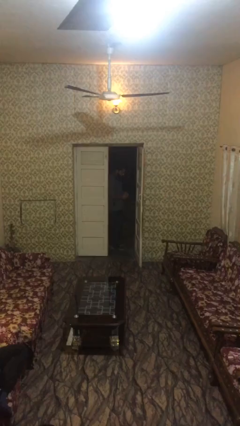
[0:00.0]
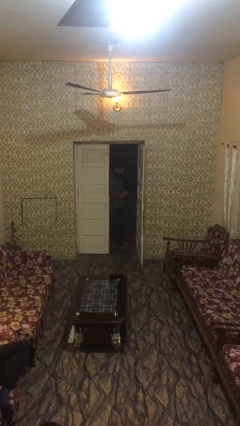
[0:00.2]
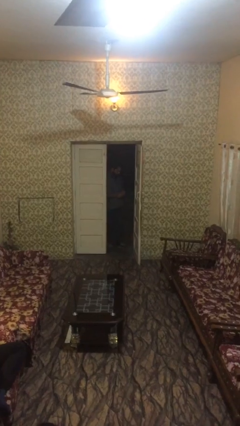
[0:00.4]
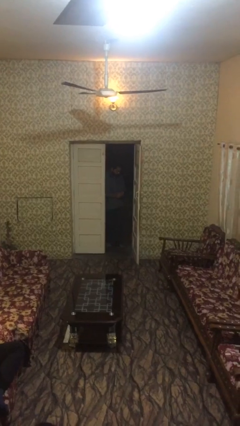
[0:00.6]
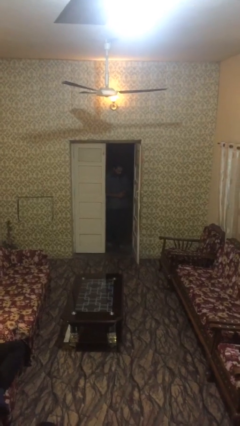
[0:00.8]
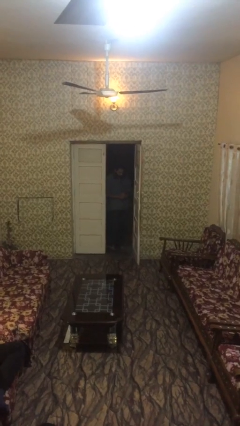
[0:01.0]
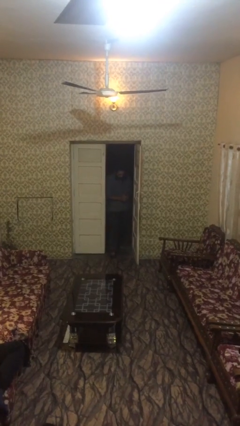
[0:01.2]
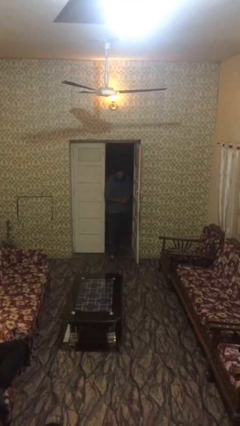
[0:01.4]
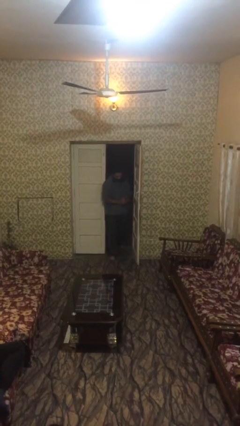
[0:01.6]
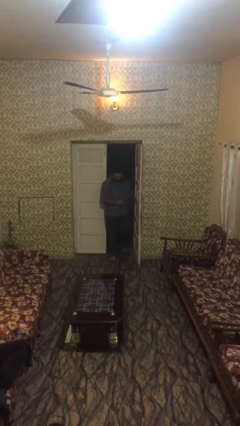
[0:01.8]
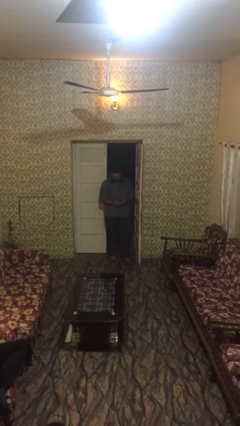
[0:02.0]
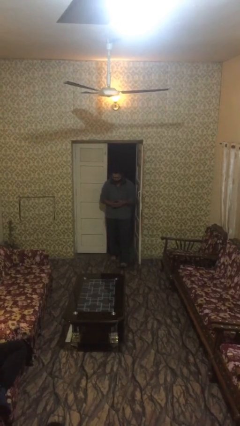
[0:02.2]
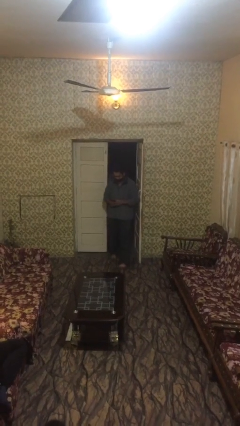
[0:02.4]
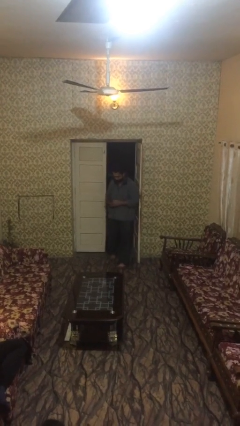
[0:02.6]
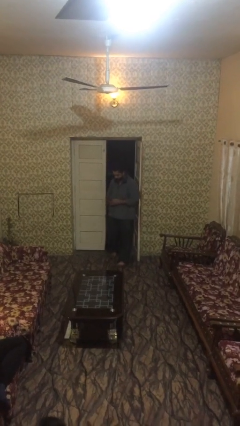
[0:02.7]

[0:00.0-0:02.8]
person enters scene through structure

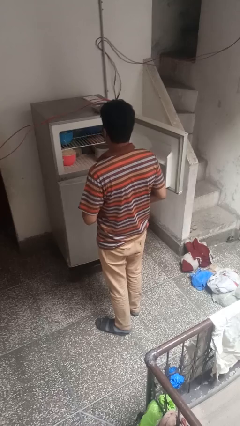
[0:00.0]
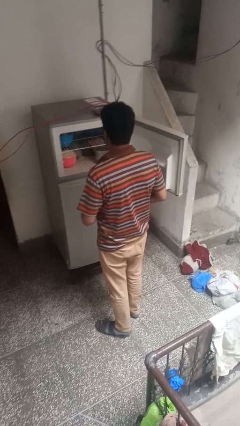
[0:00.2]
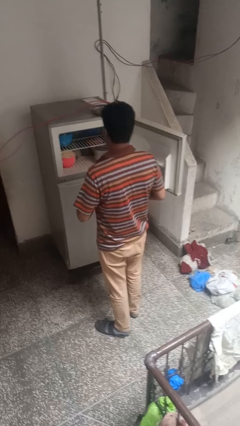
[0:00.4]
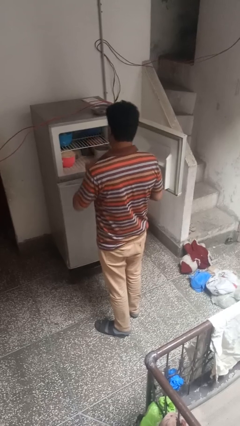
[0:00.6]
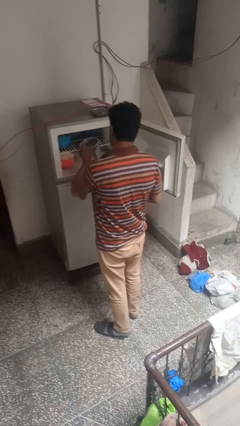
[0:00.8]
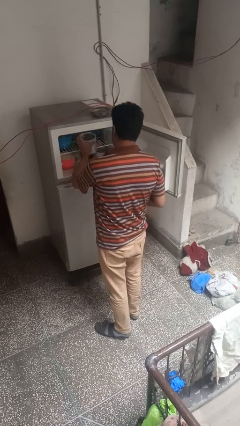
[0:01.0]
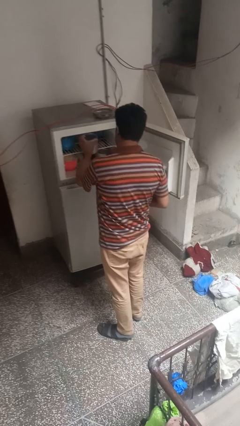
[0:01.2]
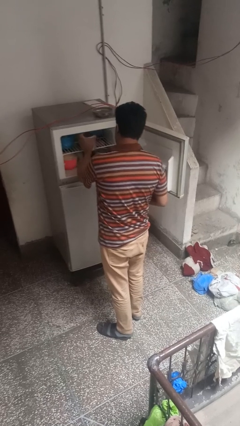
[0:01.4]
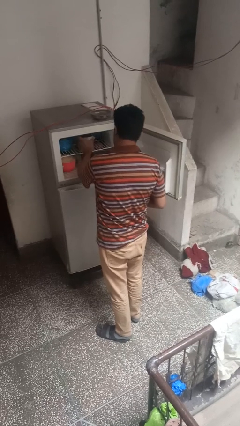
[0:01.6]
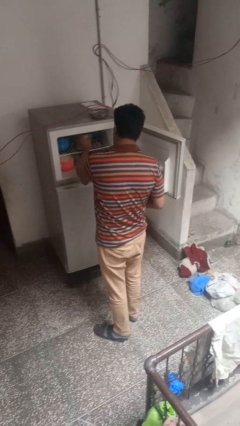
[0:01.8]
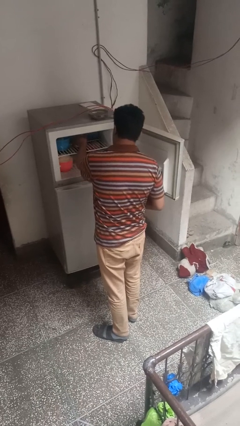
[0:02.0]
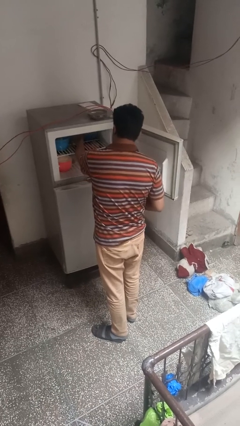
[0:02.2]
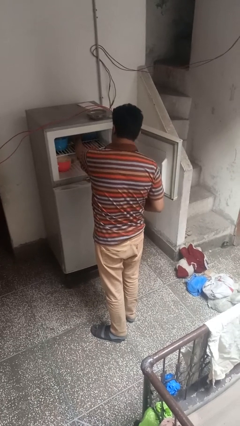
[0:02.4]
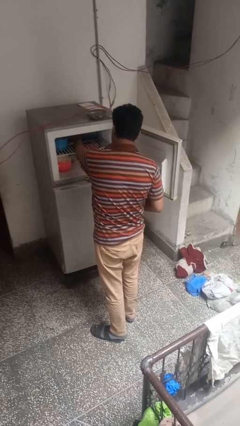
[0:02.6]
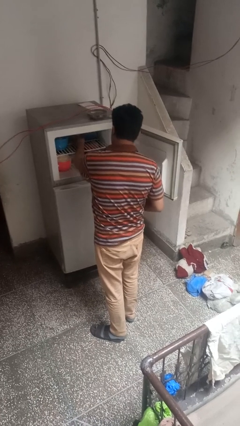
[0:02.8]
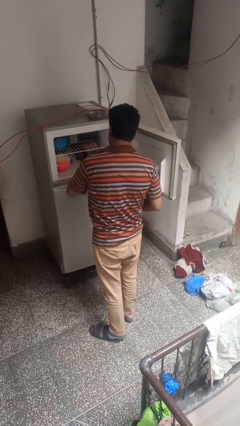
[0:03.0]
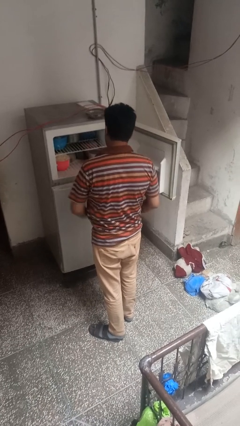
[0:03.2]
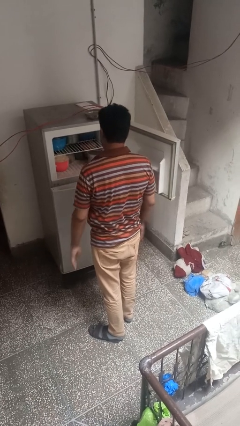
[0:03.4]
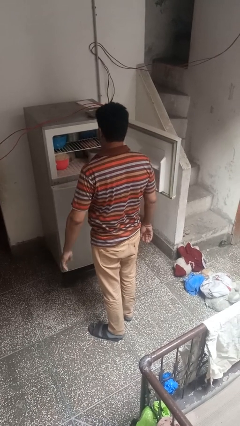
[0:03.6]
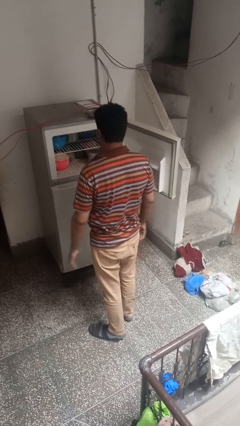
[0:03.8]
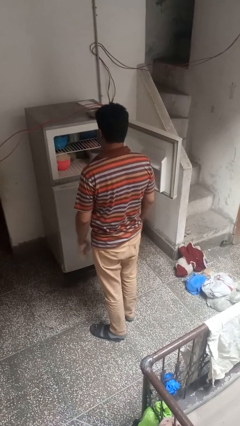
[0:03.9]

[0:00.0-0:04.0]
person puts object into refrigerator

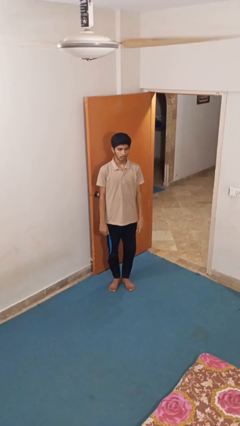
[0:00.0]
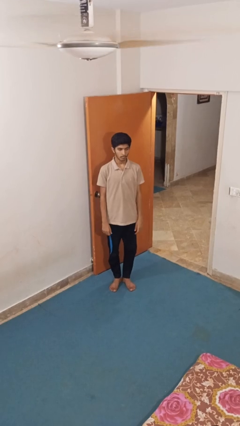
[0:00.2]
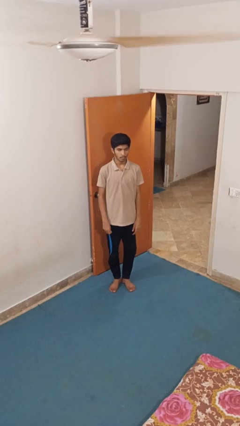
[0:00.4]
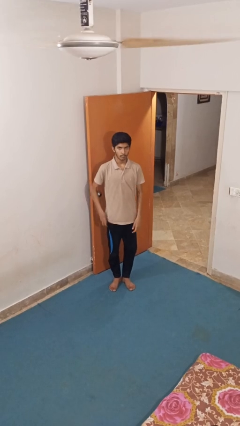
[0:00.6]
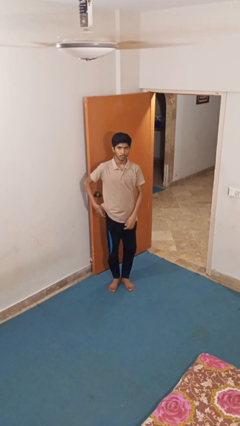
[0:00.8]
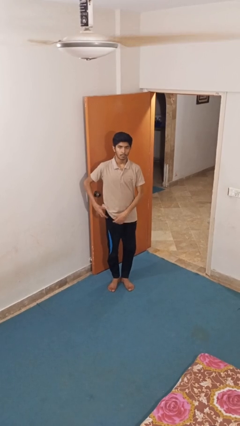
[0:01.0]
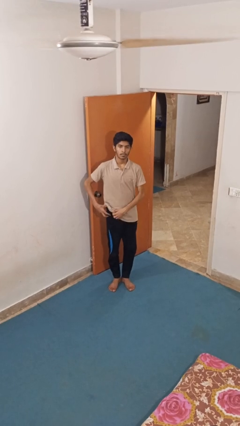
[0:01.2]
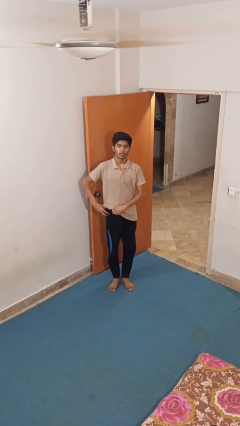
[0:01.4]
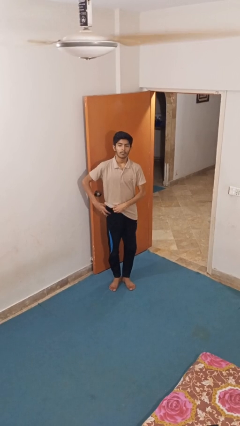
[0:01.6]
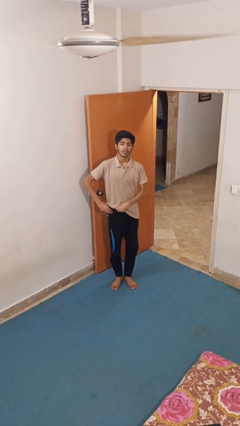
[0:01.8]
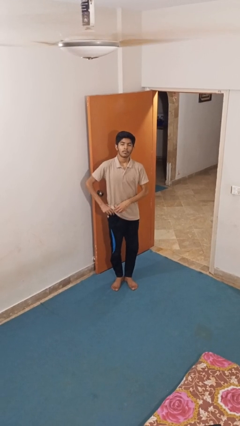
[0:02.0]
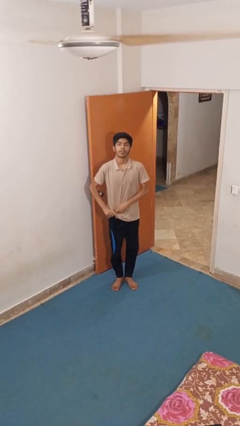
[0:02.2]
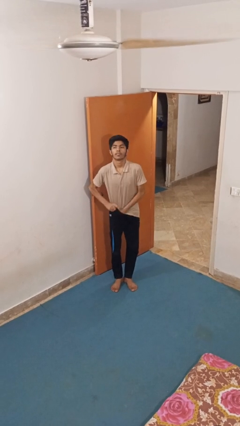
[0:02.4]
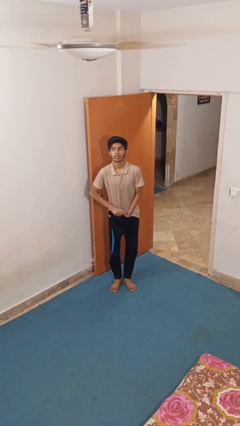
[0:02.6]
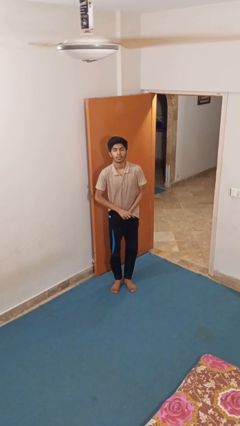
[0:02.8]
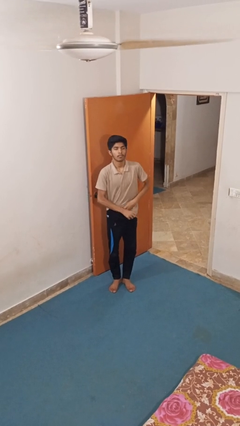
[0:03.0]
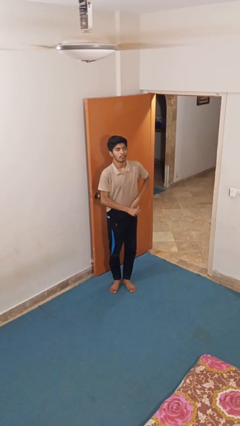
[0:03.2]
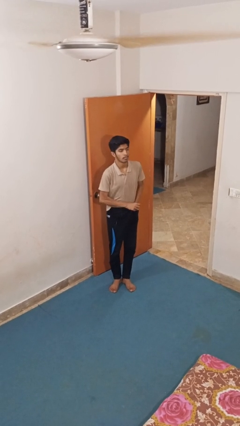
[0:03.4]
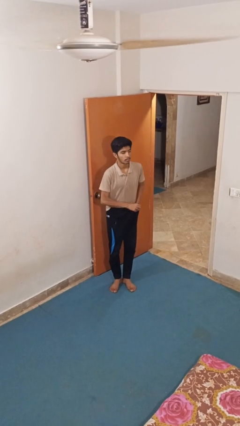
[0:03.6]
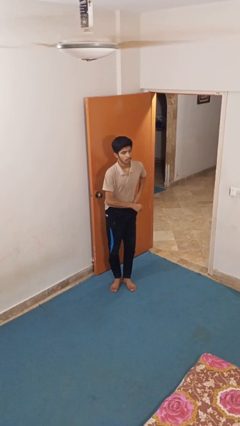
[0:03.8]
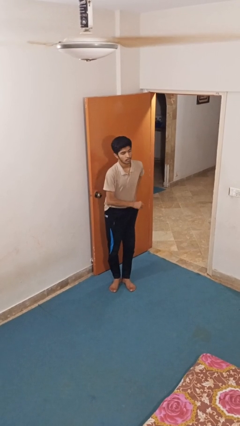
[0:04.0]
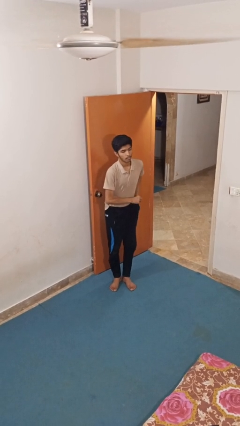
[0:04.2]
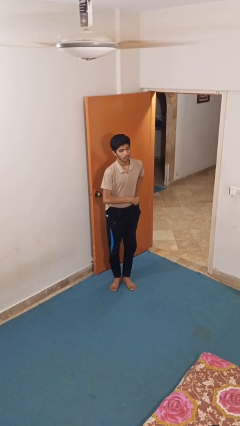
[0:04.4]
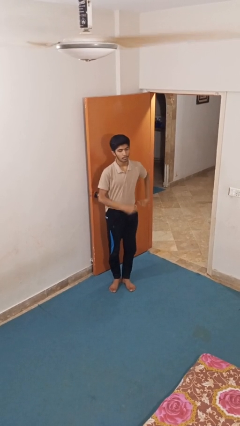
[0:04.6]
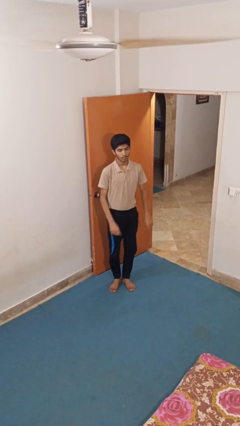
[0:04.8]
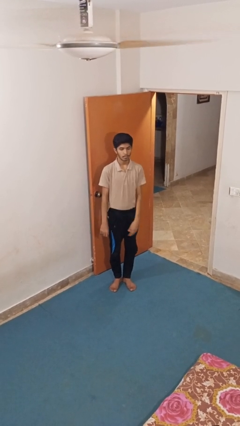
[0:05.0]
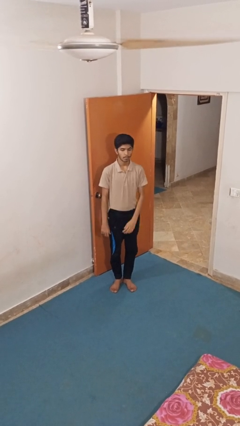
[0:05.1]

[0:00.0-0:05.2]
person tucks in shirt

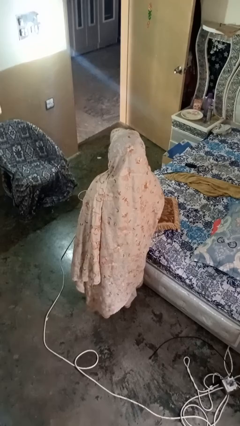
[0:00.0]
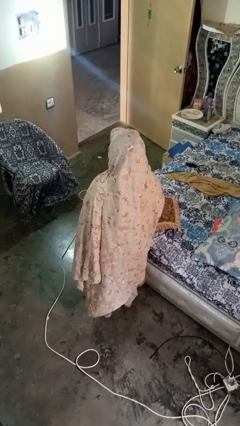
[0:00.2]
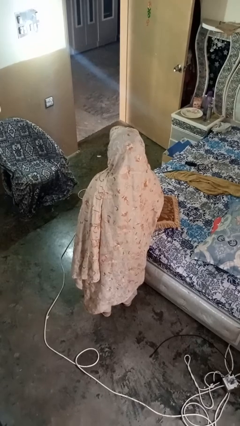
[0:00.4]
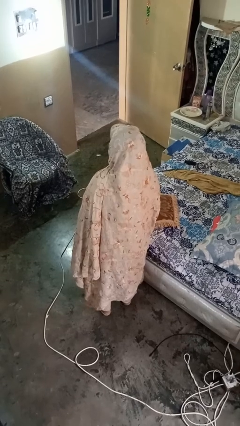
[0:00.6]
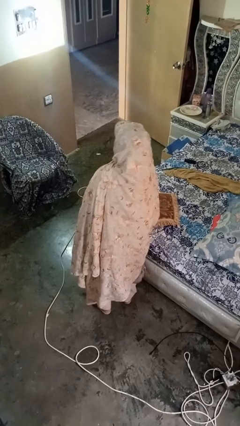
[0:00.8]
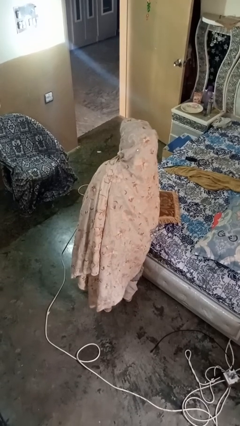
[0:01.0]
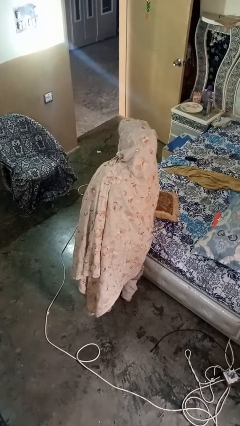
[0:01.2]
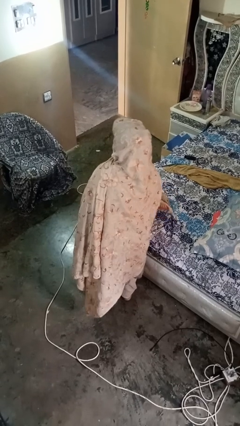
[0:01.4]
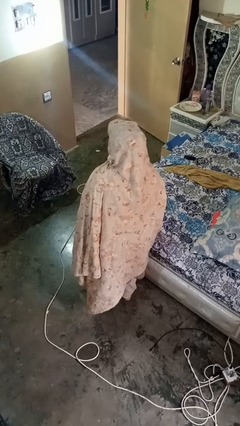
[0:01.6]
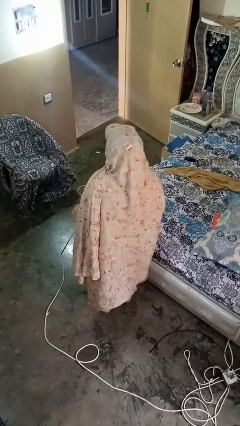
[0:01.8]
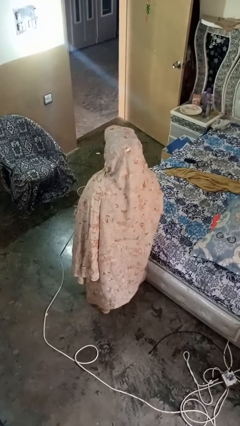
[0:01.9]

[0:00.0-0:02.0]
person picks up object from bed

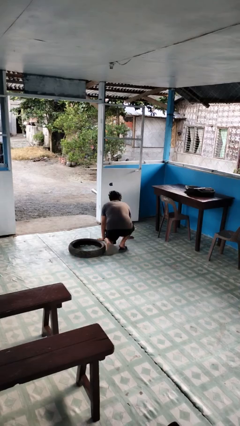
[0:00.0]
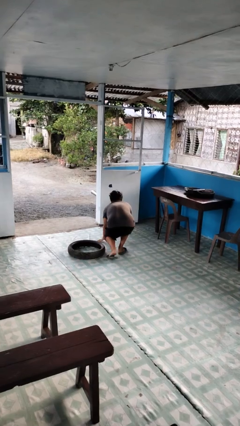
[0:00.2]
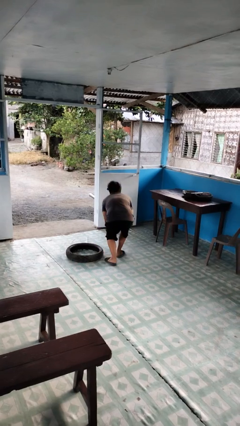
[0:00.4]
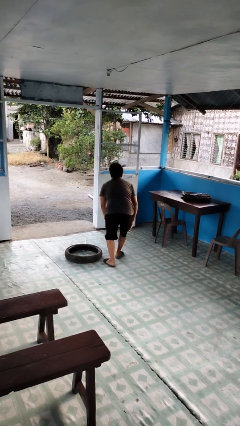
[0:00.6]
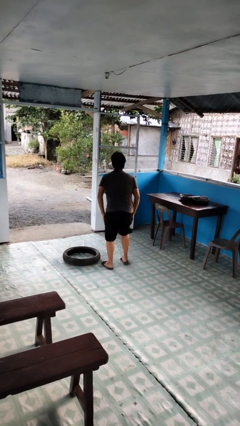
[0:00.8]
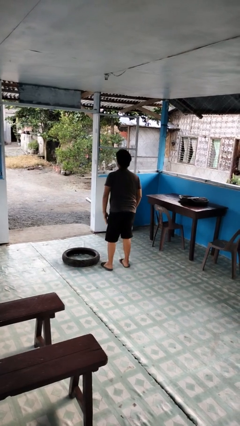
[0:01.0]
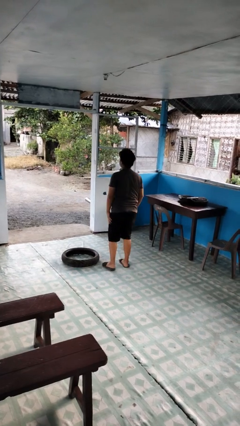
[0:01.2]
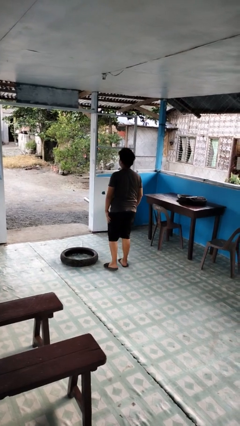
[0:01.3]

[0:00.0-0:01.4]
person stands up from floor

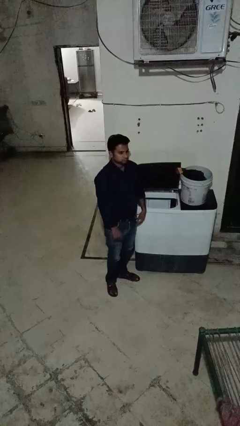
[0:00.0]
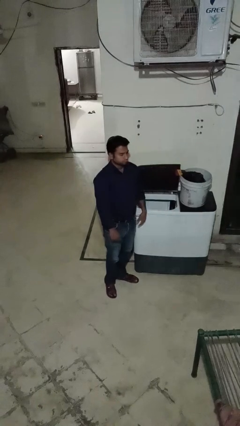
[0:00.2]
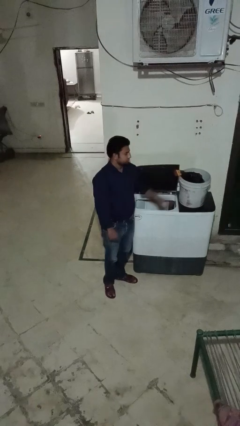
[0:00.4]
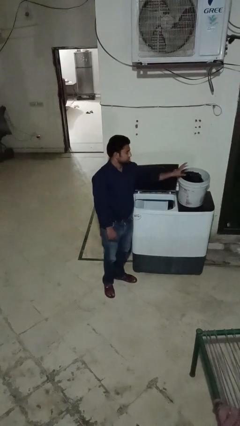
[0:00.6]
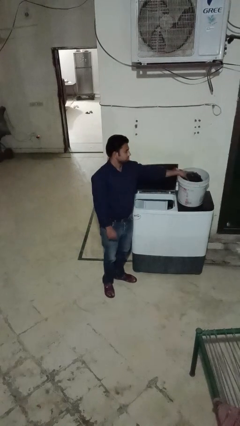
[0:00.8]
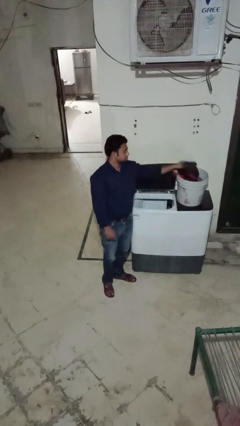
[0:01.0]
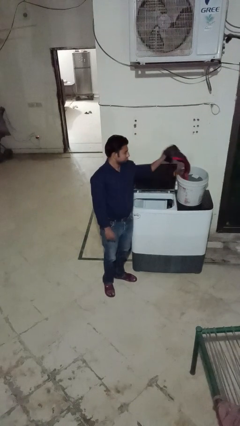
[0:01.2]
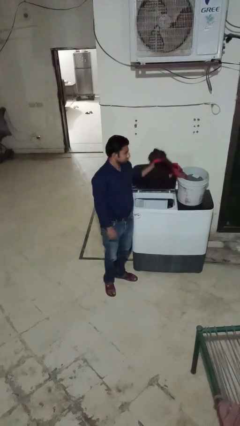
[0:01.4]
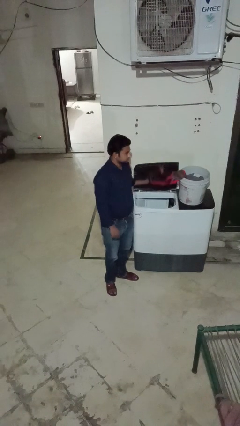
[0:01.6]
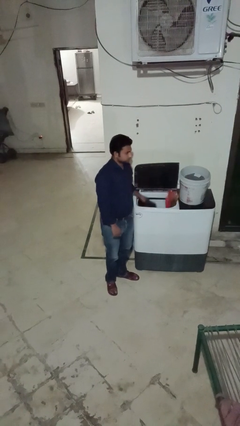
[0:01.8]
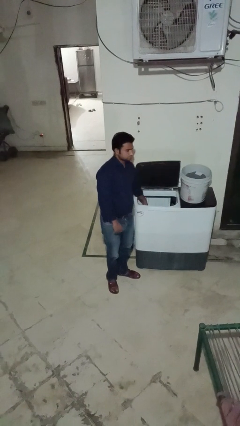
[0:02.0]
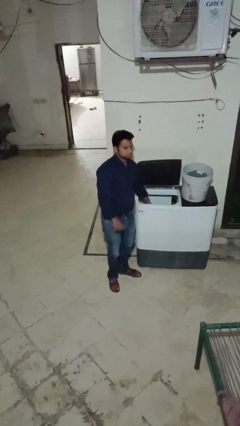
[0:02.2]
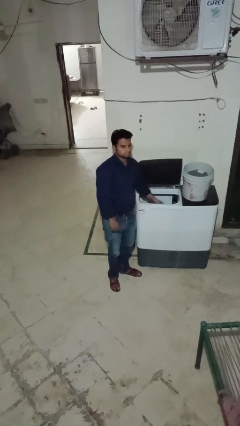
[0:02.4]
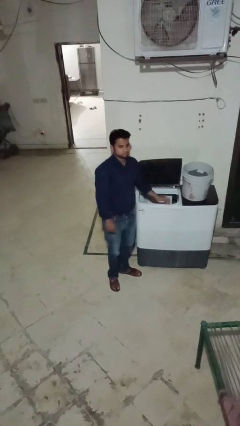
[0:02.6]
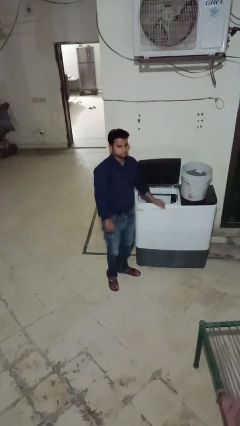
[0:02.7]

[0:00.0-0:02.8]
person loads clotheswasher
